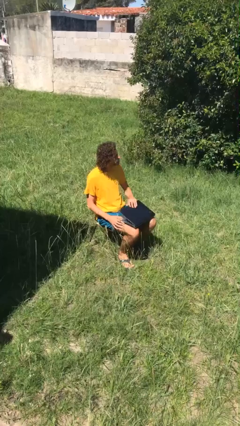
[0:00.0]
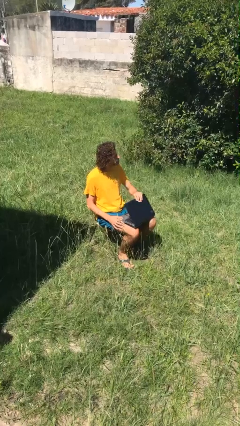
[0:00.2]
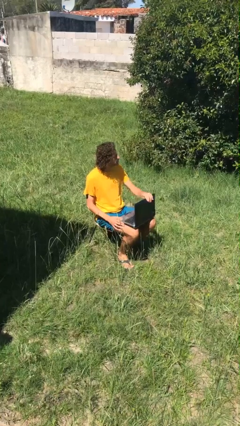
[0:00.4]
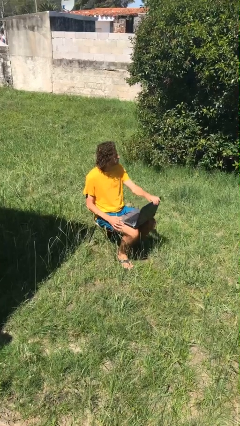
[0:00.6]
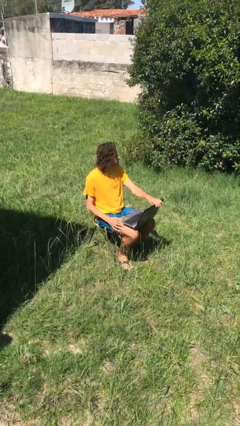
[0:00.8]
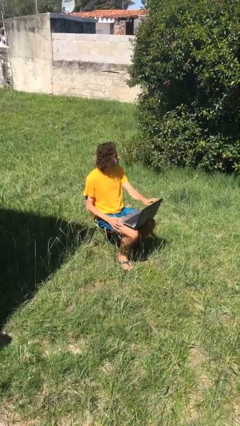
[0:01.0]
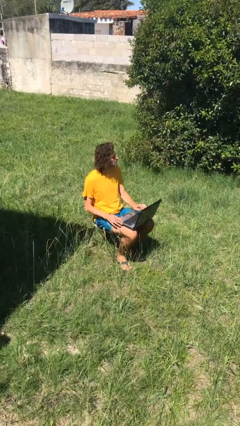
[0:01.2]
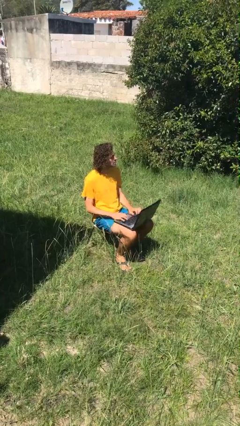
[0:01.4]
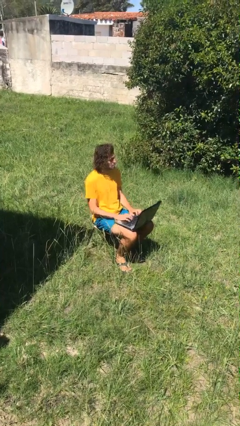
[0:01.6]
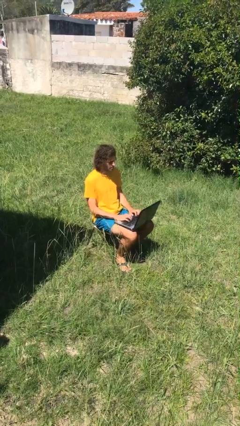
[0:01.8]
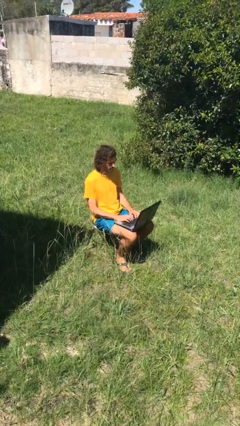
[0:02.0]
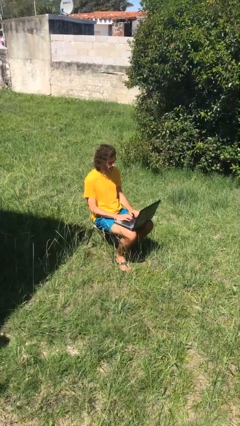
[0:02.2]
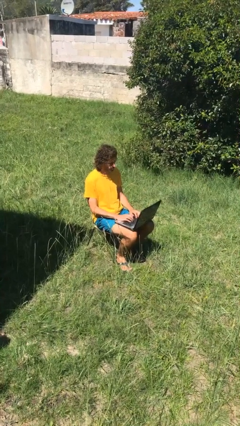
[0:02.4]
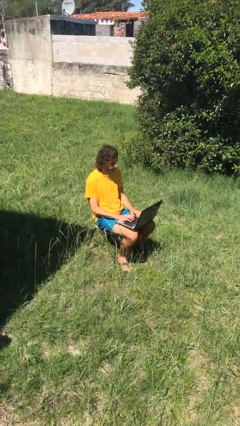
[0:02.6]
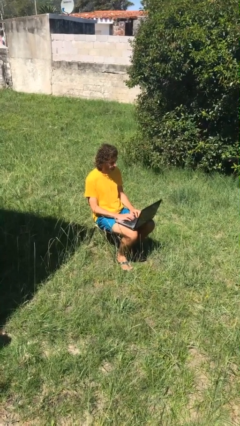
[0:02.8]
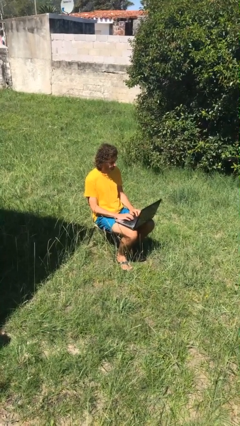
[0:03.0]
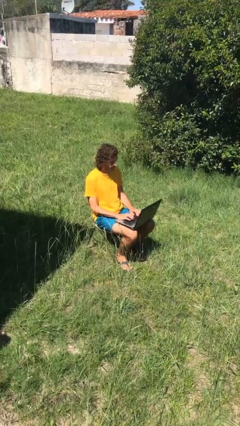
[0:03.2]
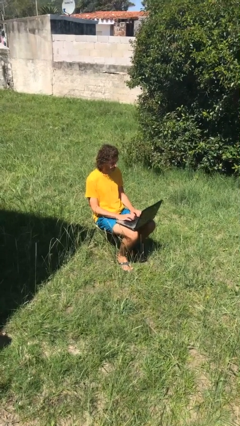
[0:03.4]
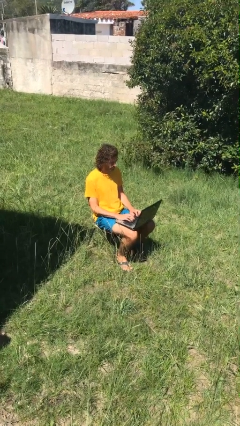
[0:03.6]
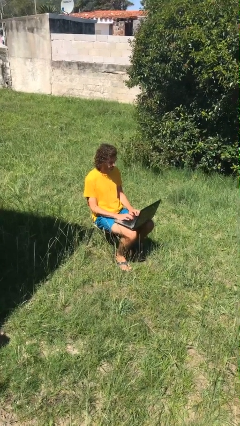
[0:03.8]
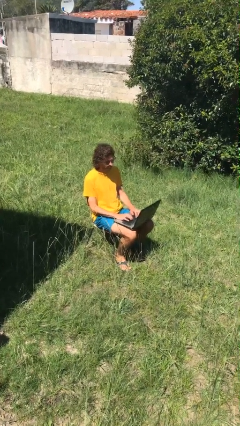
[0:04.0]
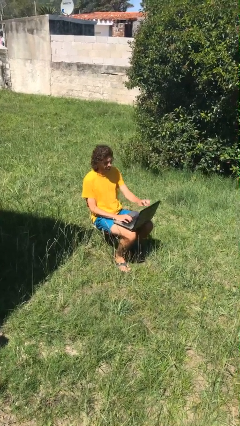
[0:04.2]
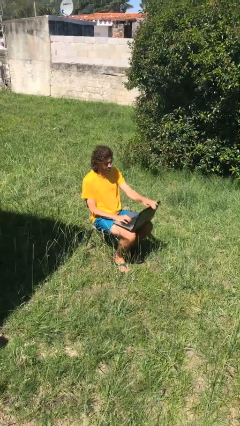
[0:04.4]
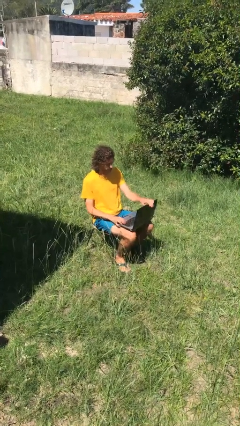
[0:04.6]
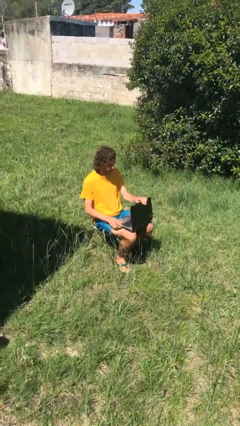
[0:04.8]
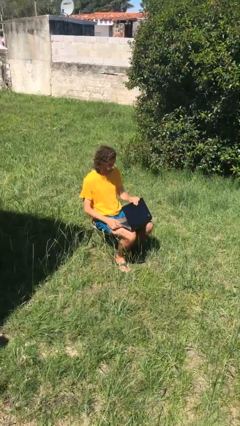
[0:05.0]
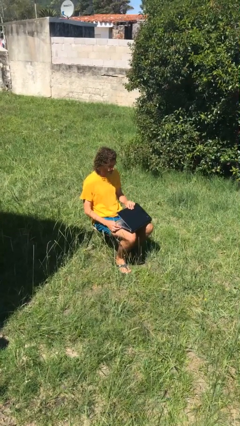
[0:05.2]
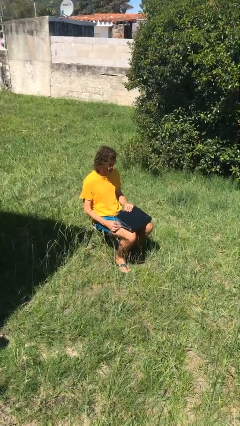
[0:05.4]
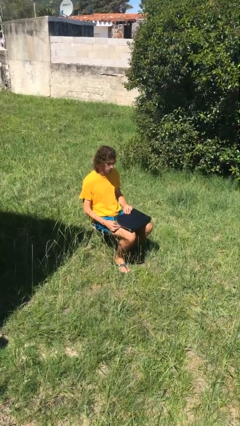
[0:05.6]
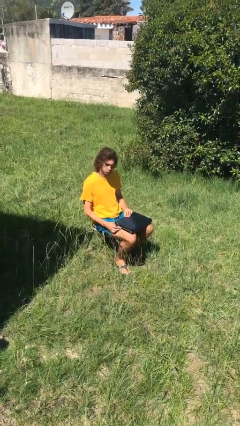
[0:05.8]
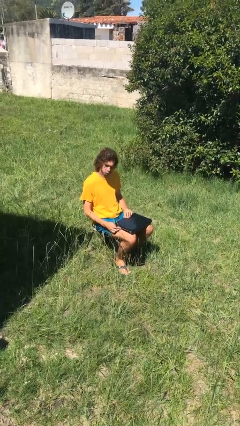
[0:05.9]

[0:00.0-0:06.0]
person interacts with laptop

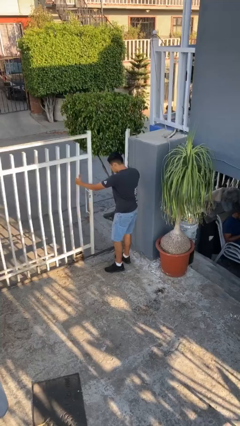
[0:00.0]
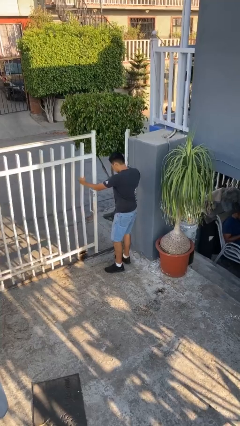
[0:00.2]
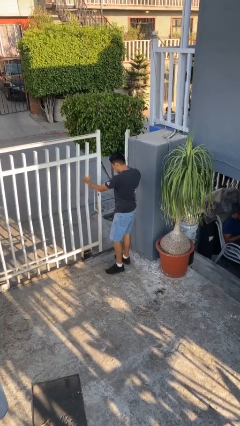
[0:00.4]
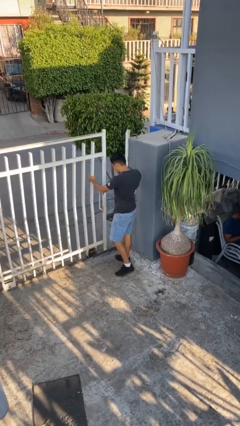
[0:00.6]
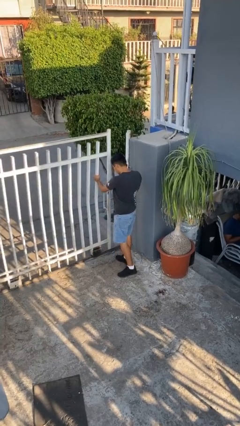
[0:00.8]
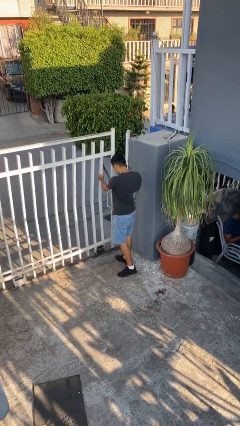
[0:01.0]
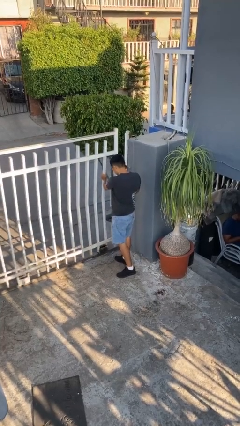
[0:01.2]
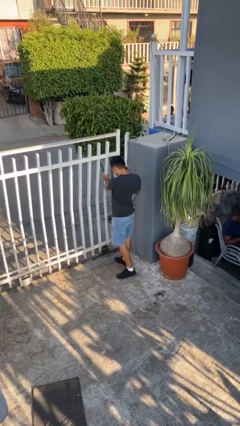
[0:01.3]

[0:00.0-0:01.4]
person closes facility door

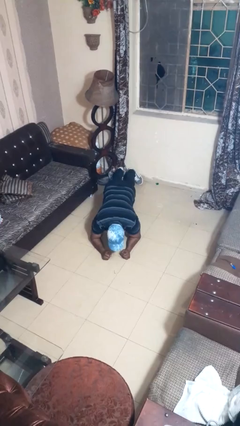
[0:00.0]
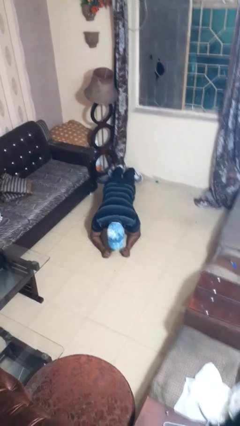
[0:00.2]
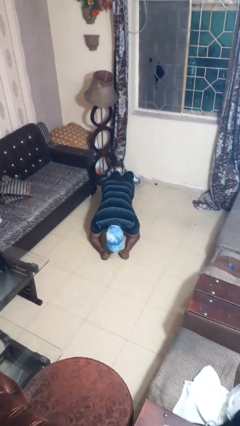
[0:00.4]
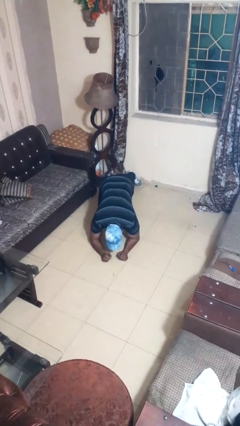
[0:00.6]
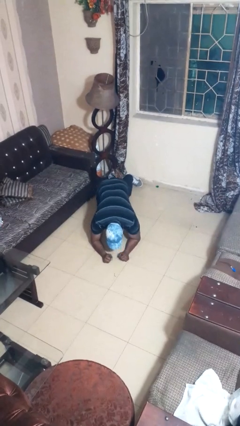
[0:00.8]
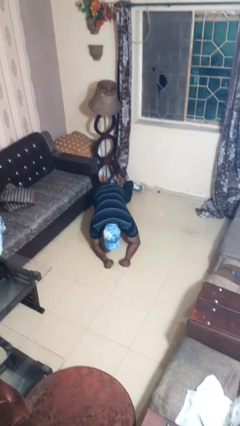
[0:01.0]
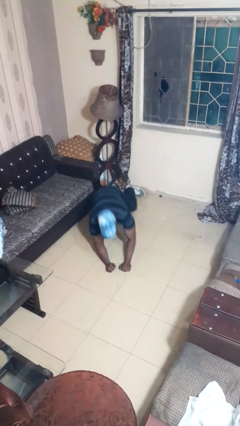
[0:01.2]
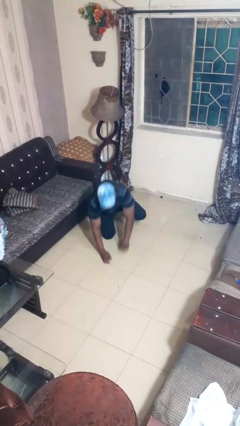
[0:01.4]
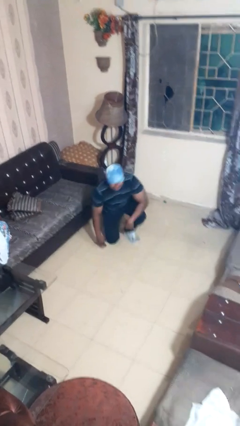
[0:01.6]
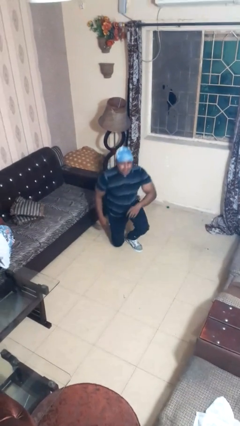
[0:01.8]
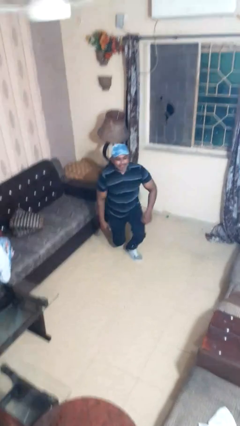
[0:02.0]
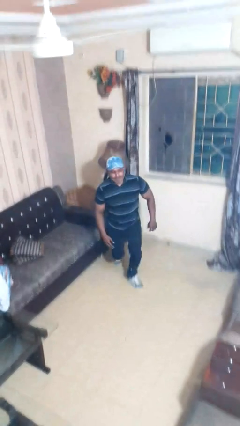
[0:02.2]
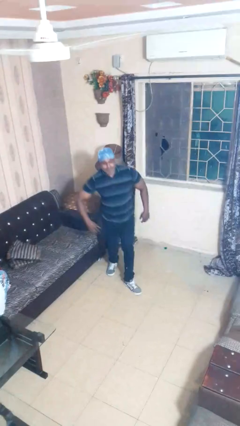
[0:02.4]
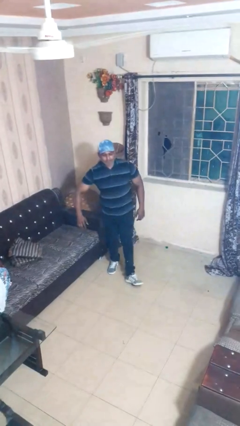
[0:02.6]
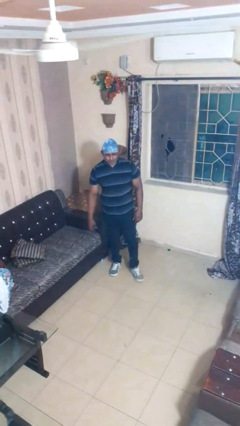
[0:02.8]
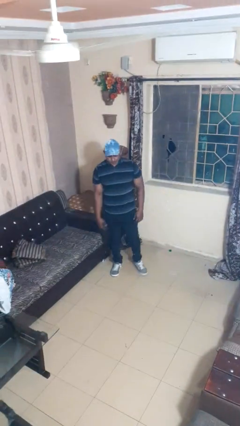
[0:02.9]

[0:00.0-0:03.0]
person stands up from floor

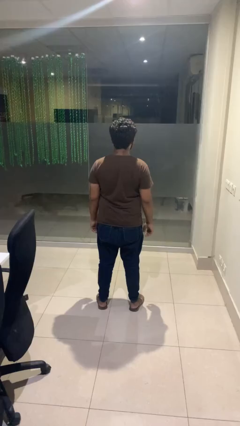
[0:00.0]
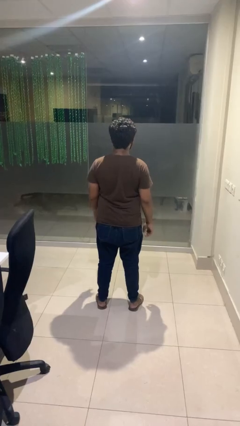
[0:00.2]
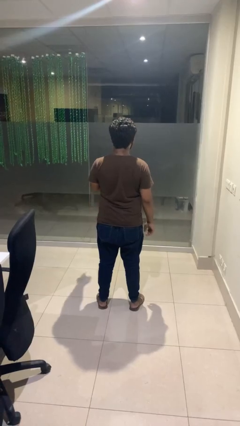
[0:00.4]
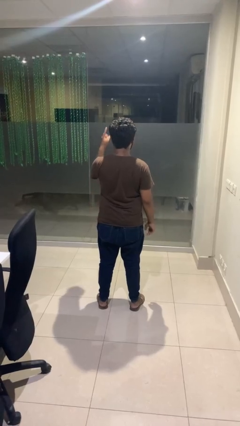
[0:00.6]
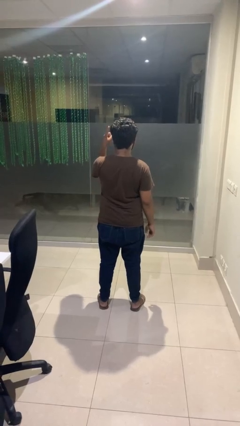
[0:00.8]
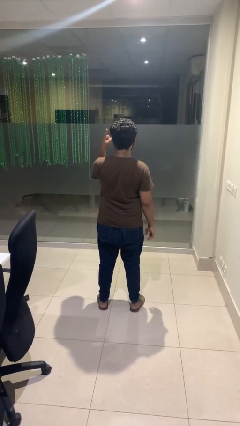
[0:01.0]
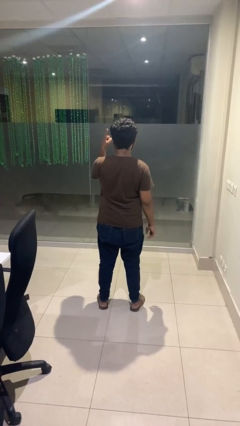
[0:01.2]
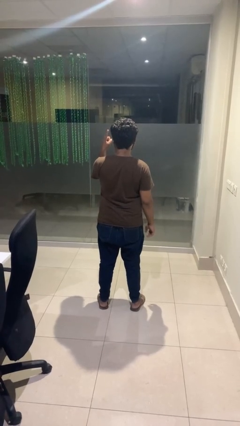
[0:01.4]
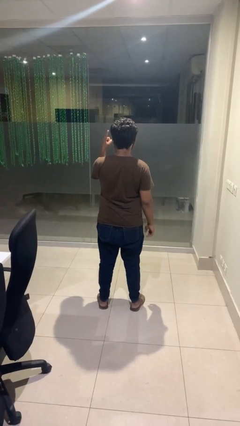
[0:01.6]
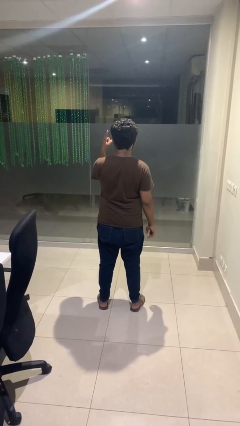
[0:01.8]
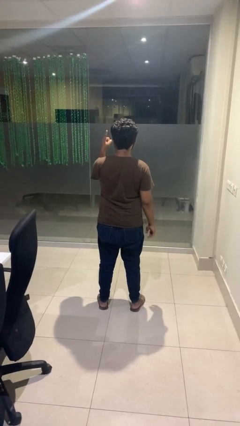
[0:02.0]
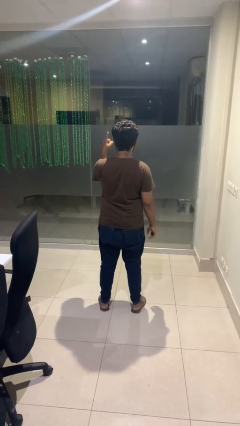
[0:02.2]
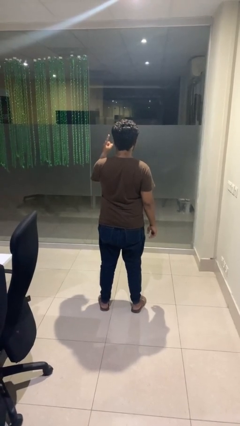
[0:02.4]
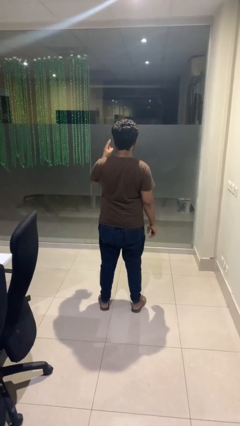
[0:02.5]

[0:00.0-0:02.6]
person gestures number one

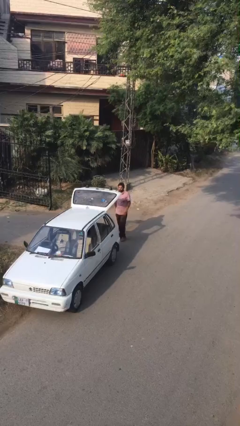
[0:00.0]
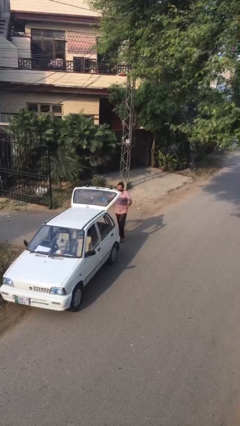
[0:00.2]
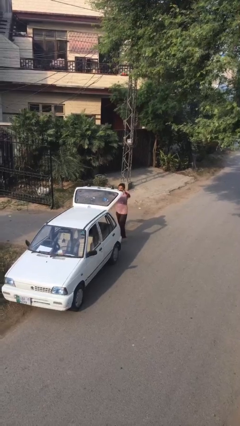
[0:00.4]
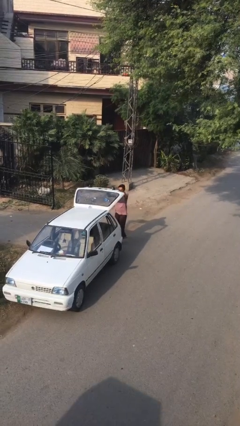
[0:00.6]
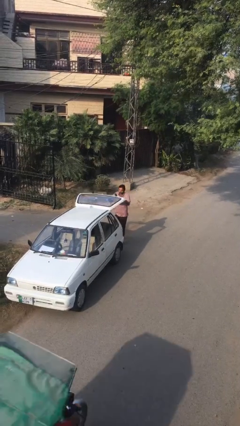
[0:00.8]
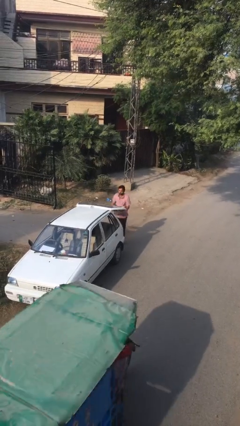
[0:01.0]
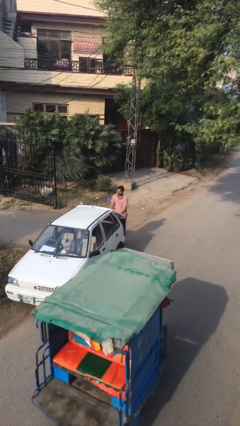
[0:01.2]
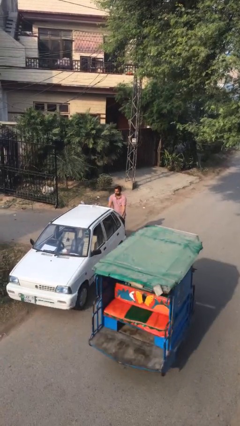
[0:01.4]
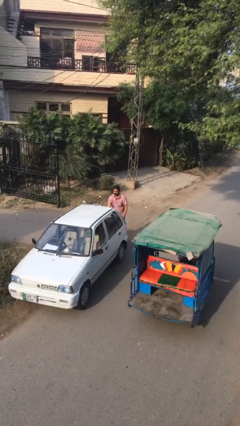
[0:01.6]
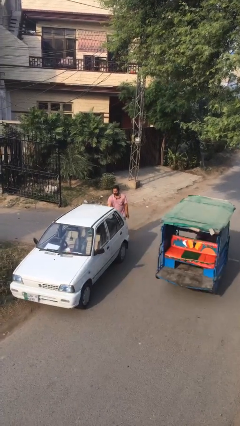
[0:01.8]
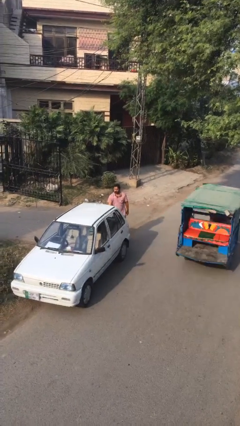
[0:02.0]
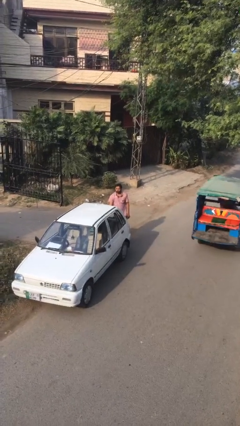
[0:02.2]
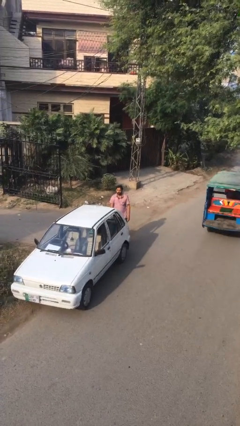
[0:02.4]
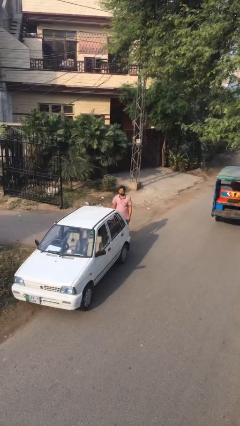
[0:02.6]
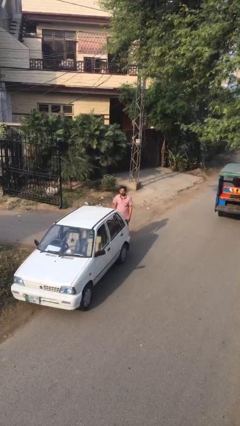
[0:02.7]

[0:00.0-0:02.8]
person closes car trunk

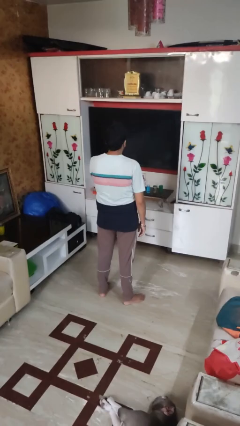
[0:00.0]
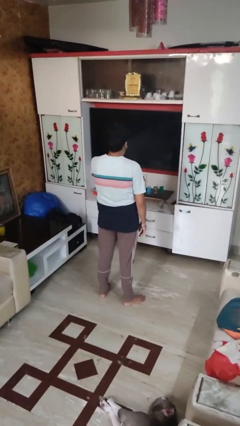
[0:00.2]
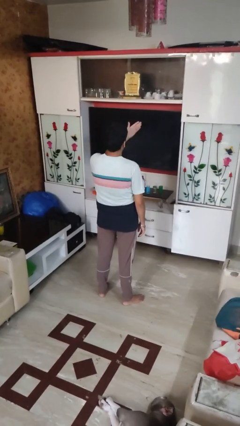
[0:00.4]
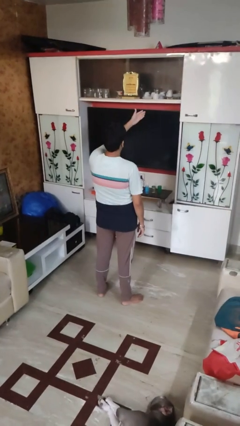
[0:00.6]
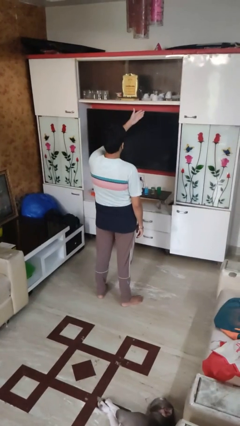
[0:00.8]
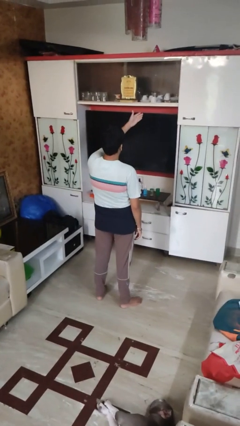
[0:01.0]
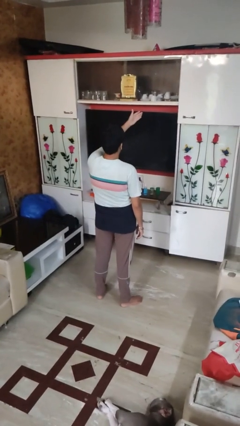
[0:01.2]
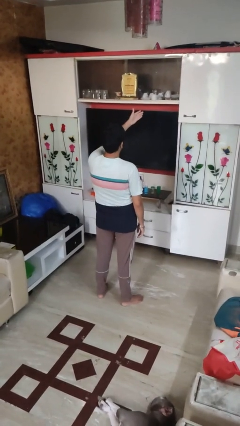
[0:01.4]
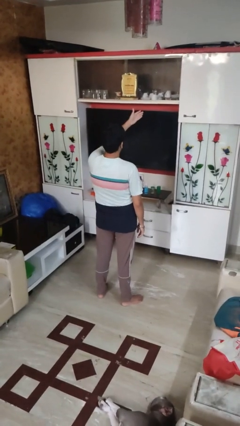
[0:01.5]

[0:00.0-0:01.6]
person gestures blow kiss
